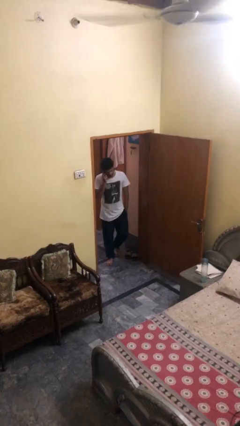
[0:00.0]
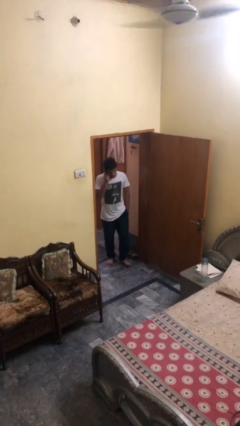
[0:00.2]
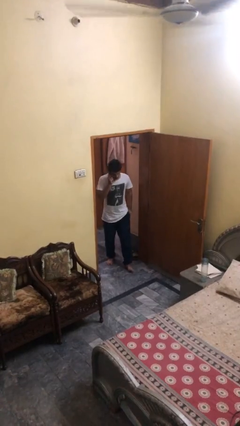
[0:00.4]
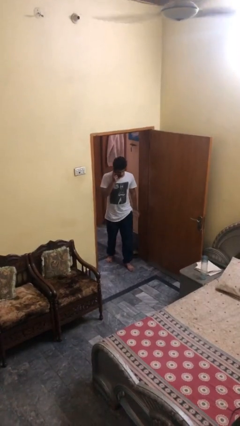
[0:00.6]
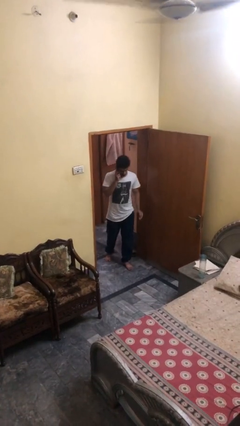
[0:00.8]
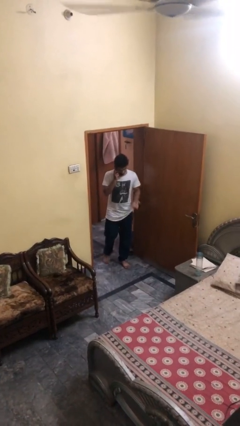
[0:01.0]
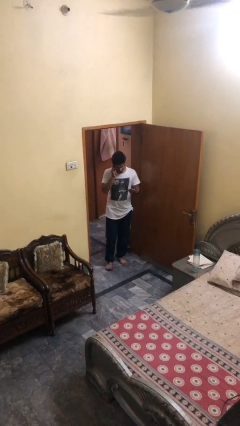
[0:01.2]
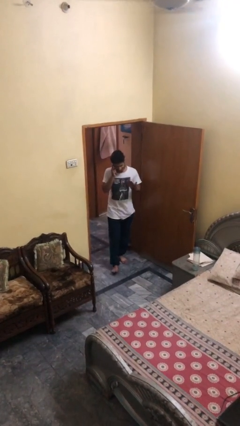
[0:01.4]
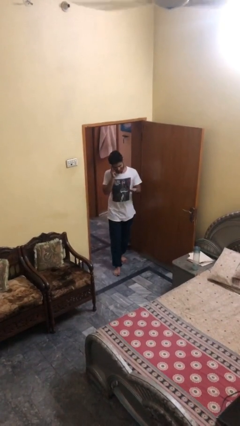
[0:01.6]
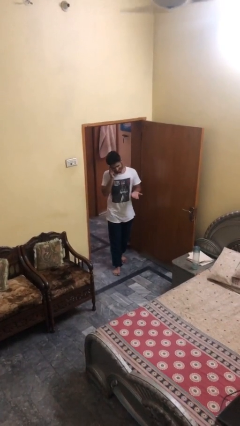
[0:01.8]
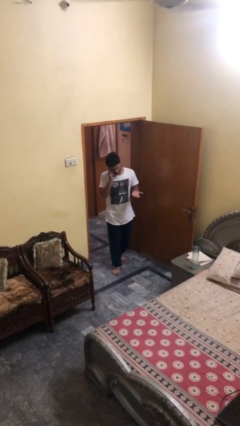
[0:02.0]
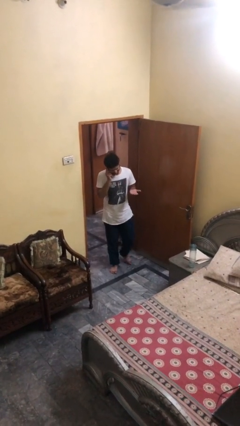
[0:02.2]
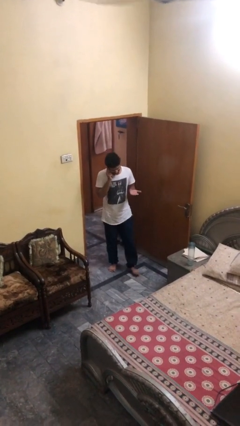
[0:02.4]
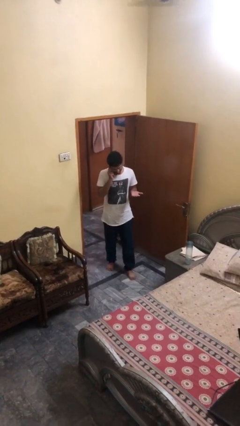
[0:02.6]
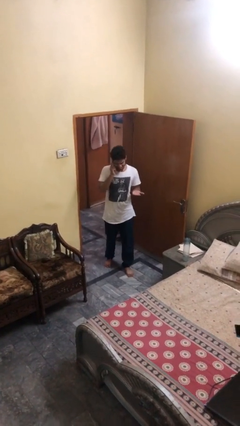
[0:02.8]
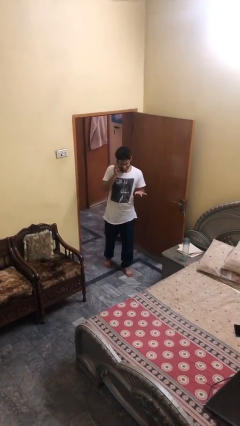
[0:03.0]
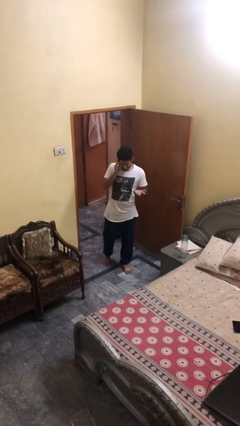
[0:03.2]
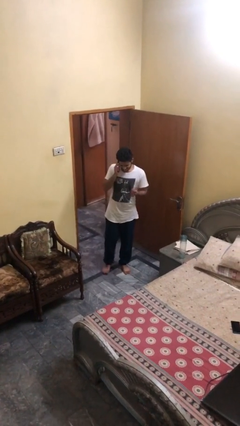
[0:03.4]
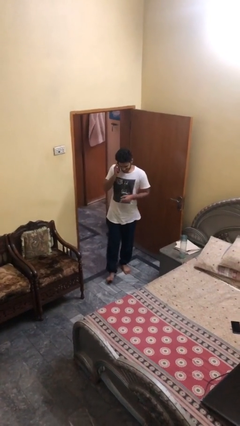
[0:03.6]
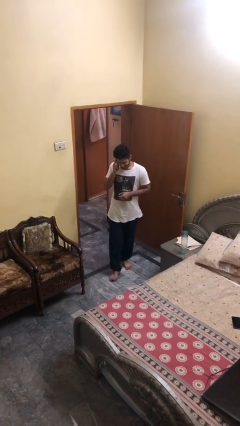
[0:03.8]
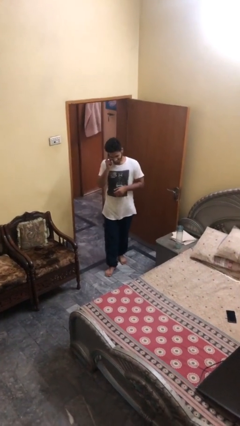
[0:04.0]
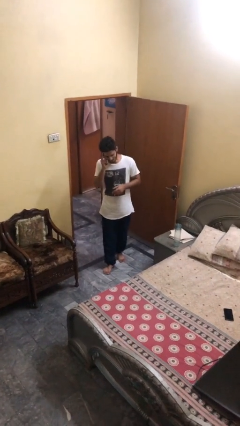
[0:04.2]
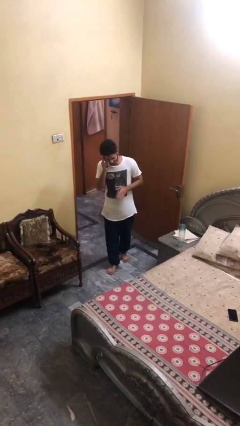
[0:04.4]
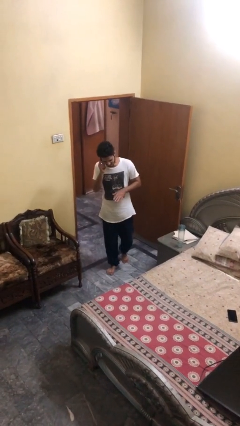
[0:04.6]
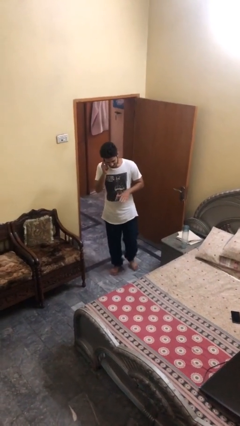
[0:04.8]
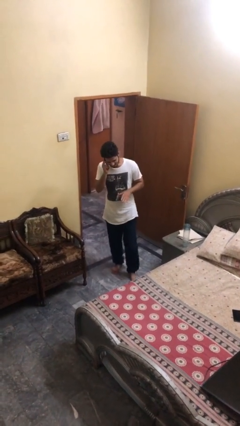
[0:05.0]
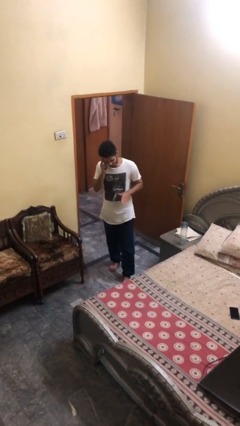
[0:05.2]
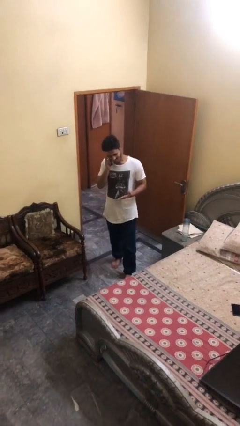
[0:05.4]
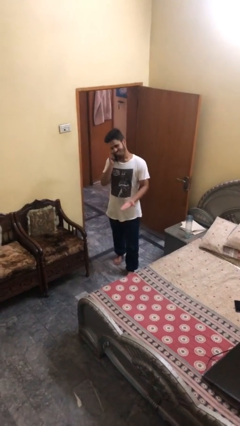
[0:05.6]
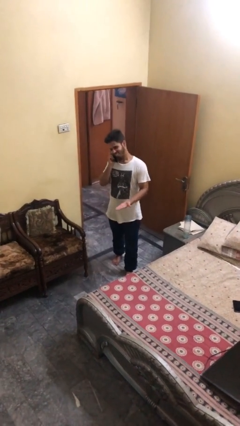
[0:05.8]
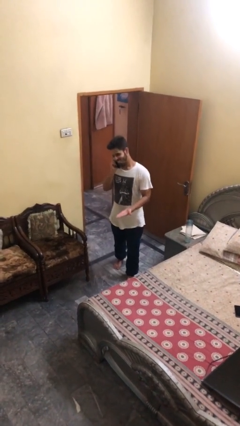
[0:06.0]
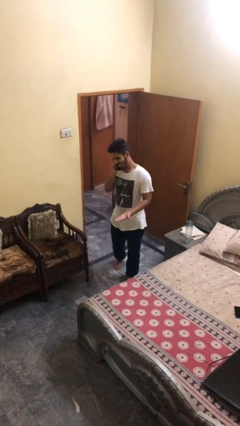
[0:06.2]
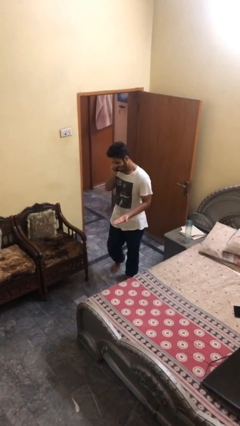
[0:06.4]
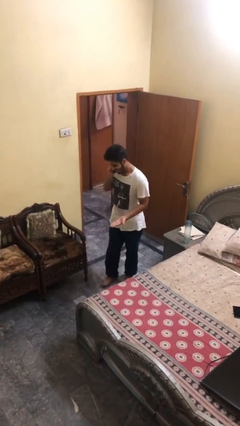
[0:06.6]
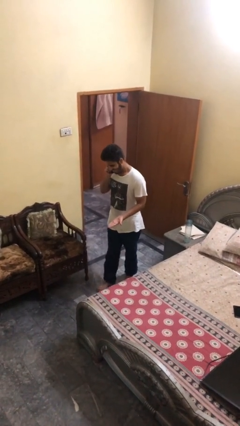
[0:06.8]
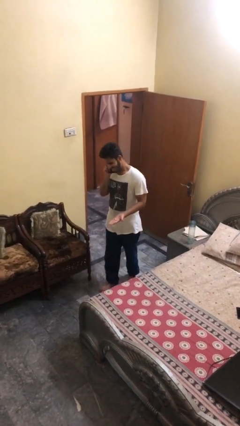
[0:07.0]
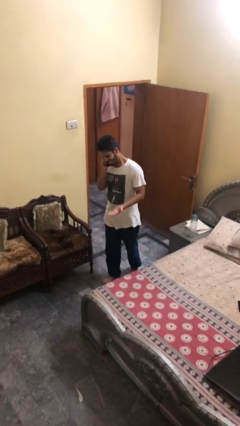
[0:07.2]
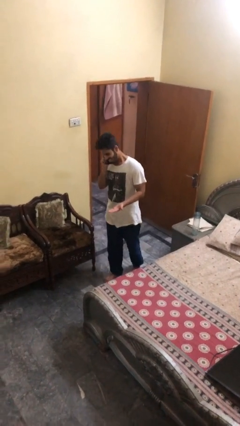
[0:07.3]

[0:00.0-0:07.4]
person enters scene through structure

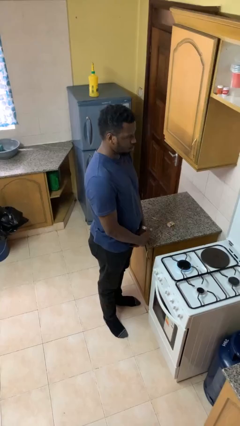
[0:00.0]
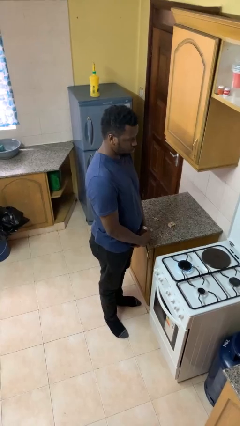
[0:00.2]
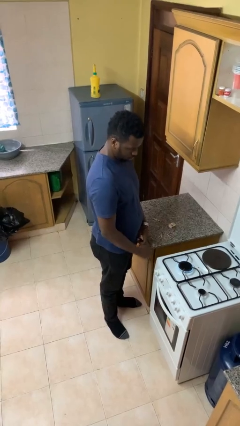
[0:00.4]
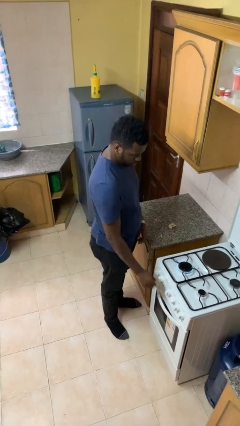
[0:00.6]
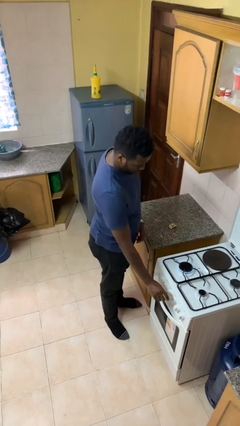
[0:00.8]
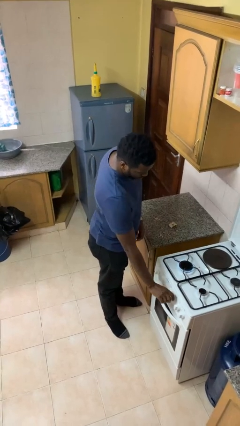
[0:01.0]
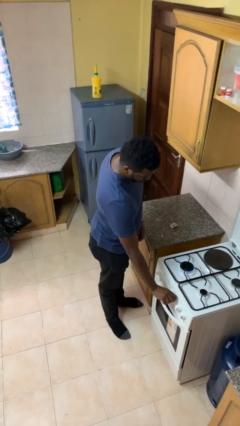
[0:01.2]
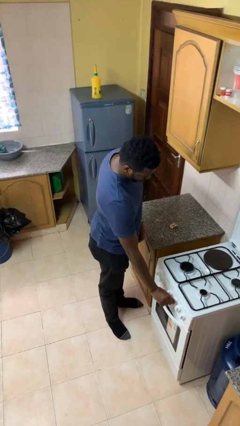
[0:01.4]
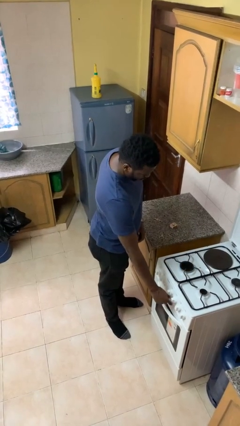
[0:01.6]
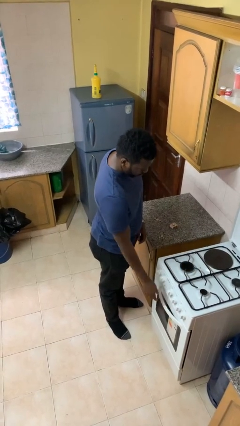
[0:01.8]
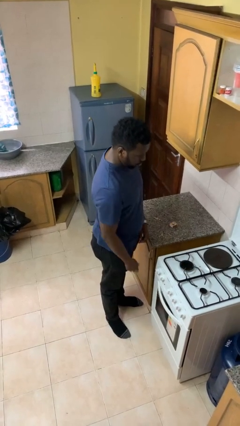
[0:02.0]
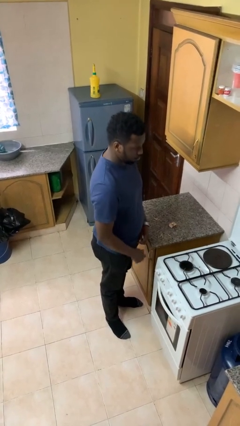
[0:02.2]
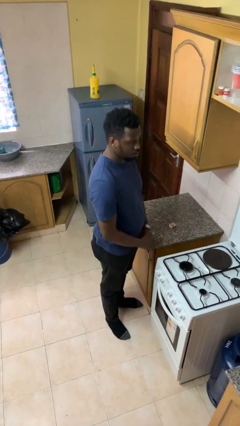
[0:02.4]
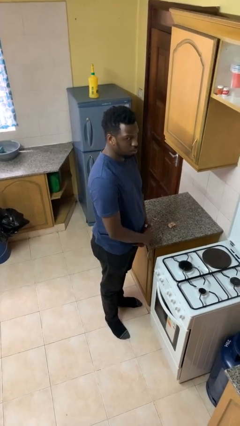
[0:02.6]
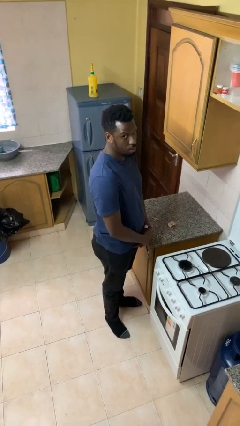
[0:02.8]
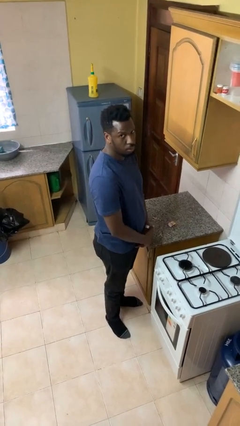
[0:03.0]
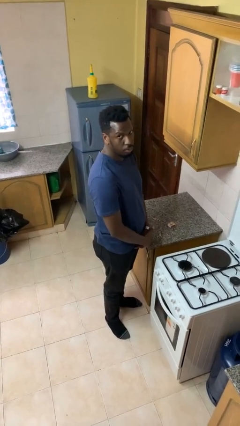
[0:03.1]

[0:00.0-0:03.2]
person turns off stovetop

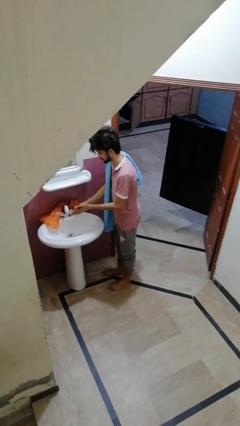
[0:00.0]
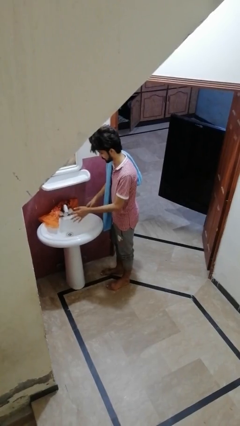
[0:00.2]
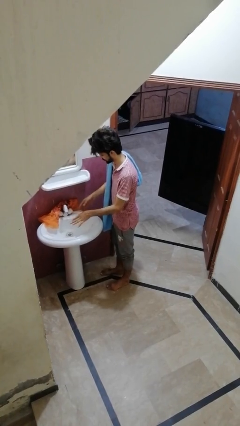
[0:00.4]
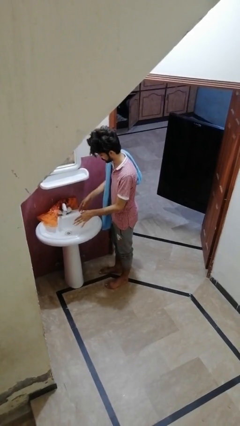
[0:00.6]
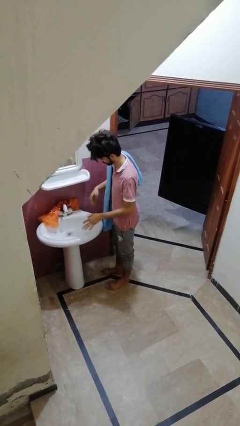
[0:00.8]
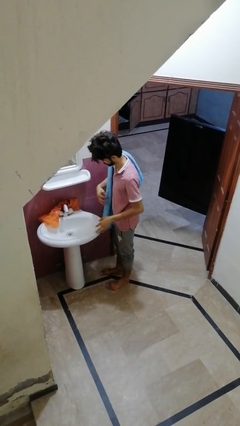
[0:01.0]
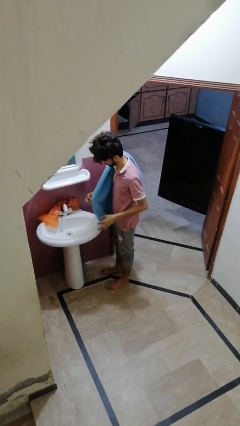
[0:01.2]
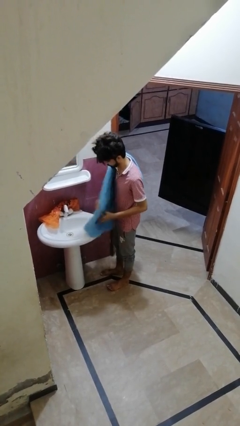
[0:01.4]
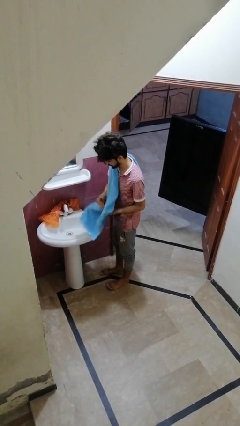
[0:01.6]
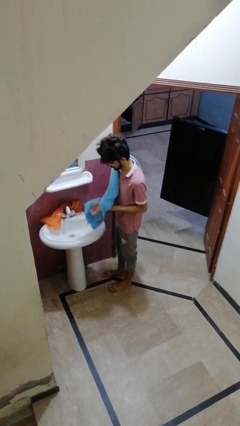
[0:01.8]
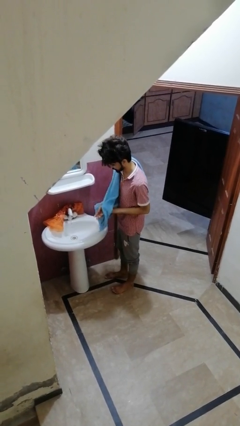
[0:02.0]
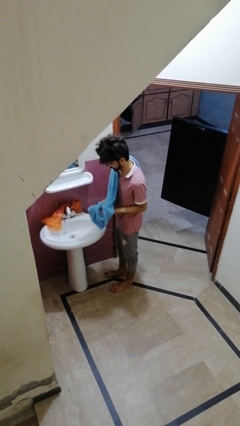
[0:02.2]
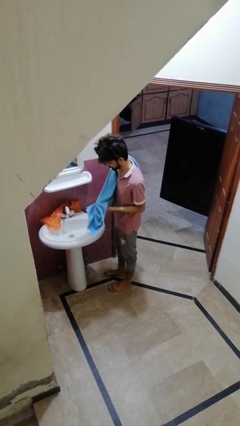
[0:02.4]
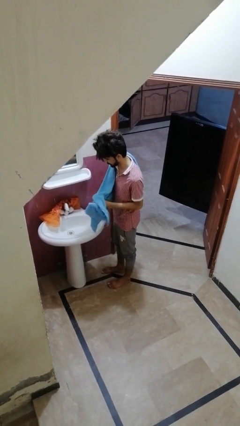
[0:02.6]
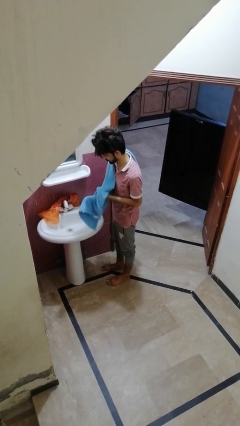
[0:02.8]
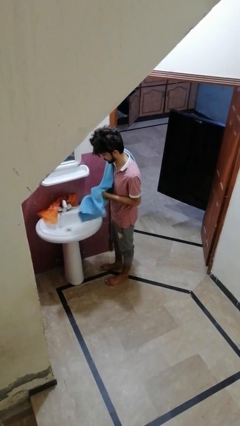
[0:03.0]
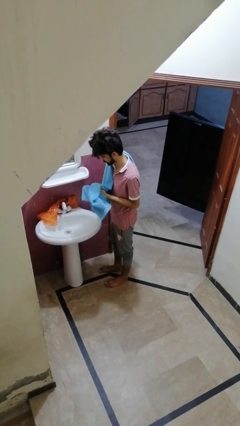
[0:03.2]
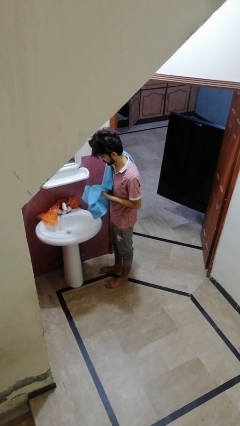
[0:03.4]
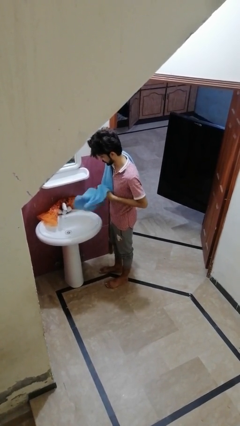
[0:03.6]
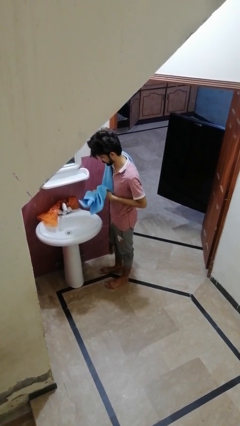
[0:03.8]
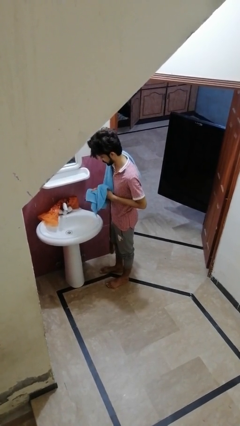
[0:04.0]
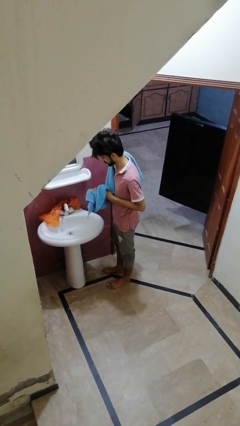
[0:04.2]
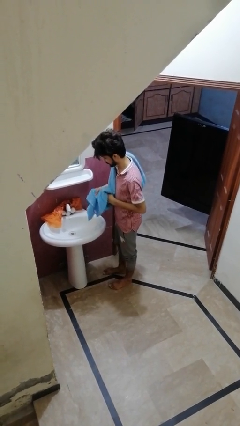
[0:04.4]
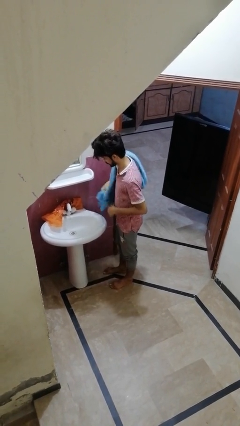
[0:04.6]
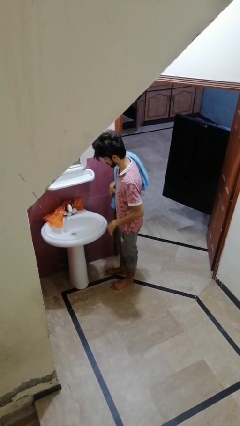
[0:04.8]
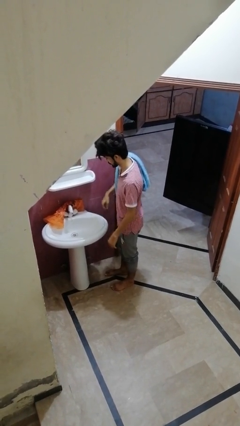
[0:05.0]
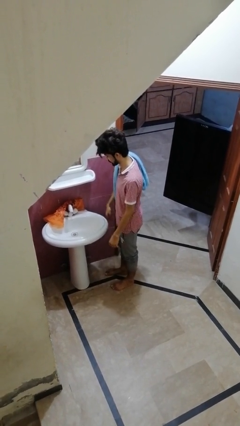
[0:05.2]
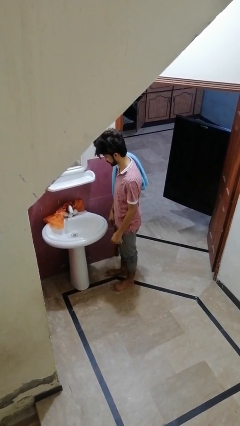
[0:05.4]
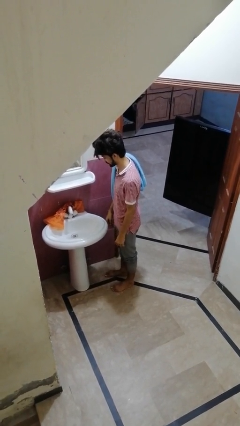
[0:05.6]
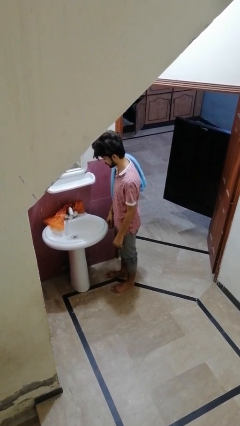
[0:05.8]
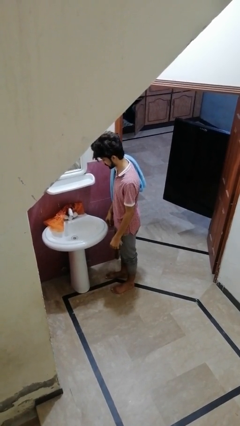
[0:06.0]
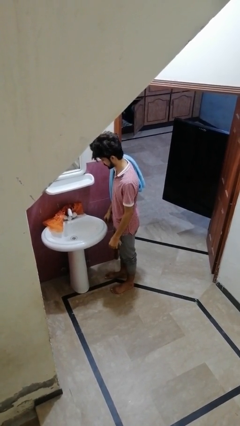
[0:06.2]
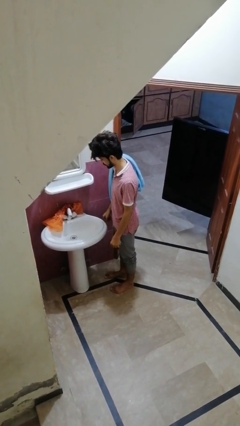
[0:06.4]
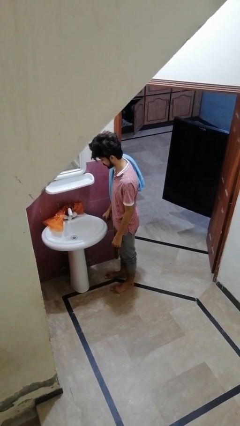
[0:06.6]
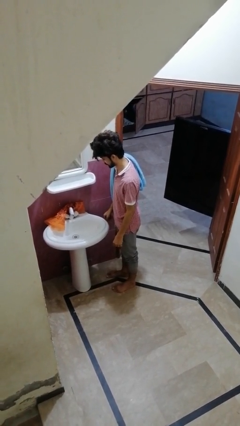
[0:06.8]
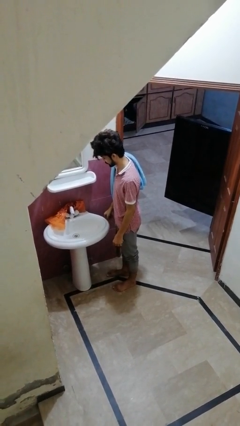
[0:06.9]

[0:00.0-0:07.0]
person dries hands with towel
